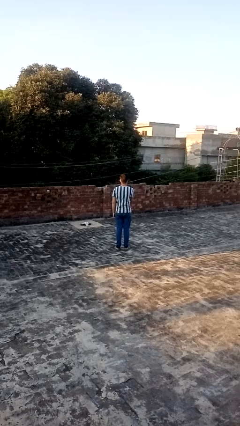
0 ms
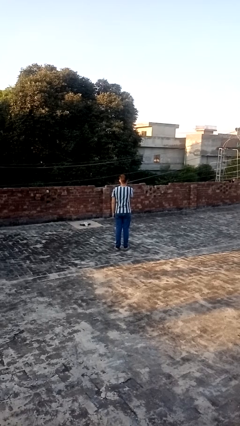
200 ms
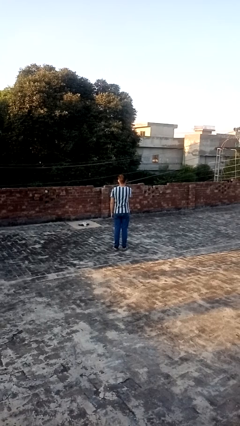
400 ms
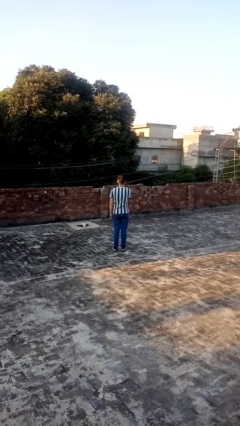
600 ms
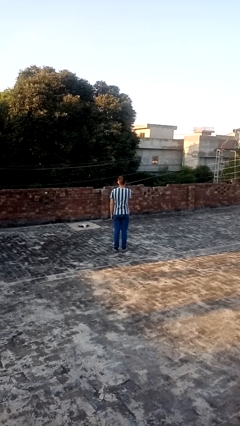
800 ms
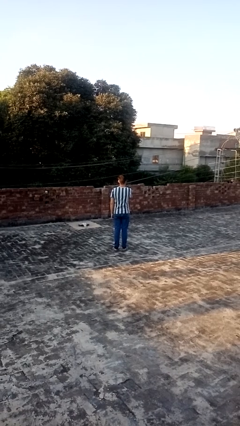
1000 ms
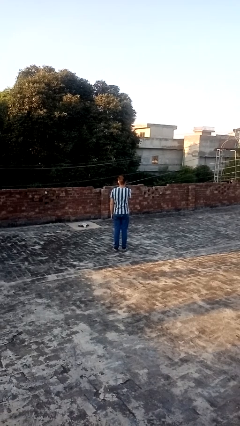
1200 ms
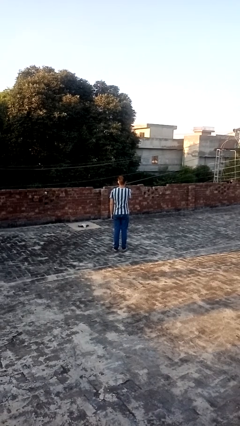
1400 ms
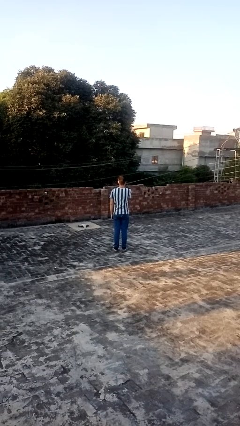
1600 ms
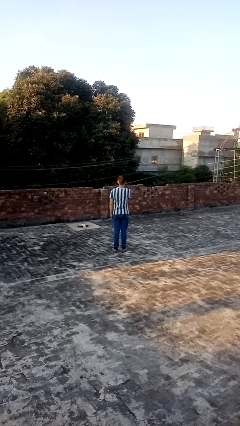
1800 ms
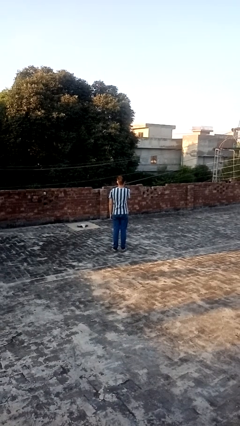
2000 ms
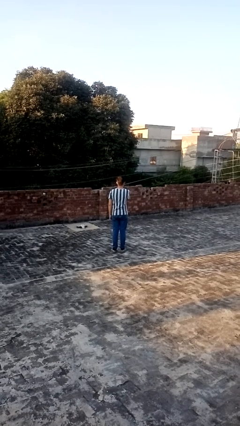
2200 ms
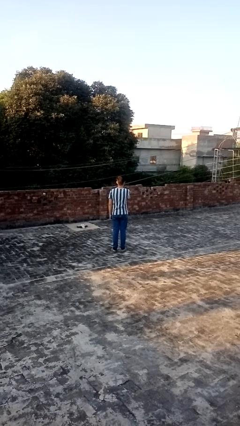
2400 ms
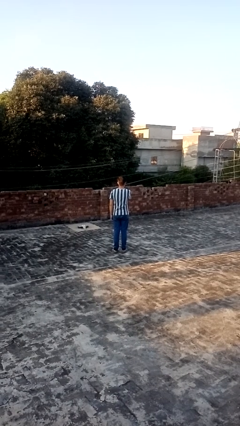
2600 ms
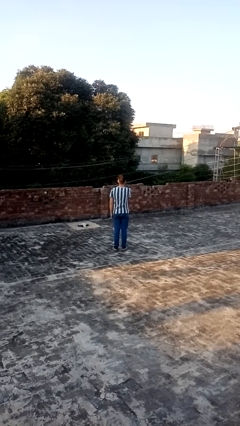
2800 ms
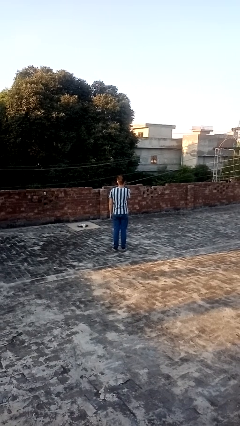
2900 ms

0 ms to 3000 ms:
person gestures swipe left

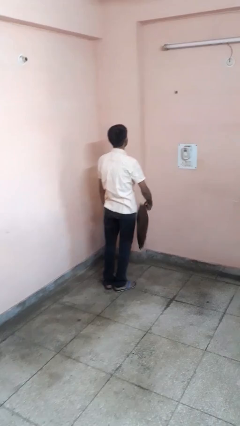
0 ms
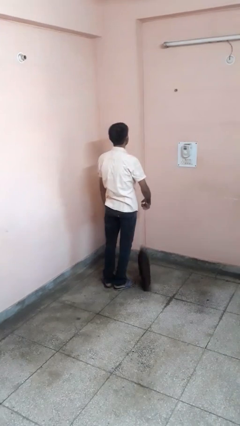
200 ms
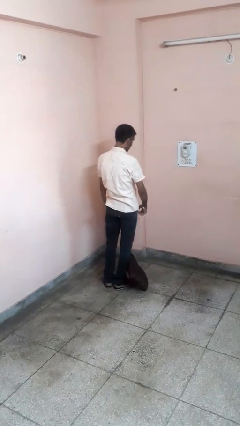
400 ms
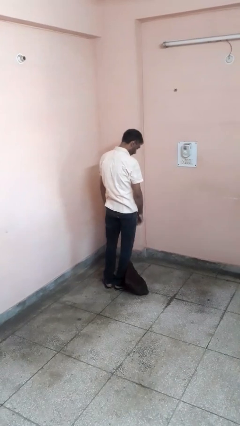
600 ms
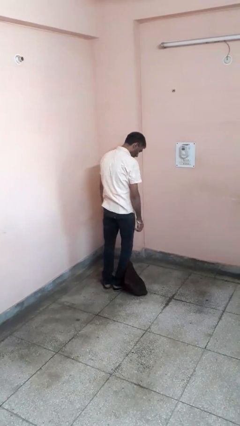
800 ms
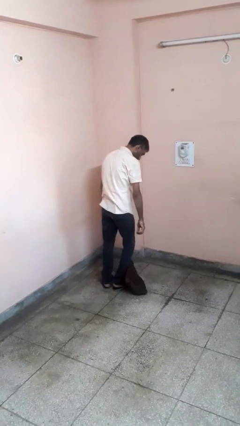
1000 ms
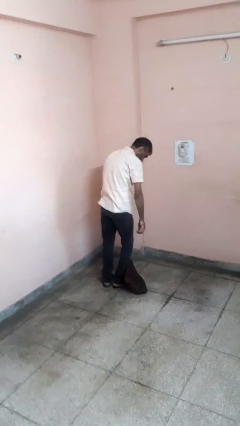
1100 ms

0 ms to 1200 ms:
person throws object to ground

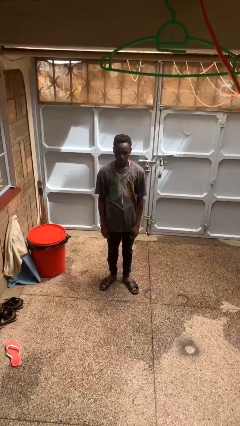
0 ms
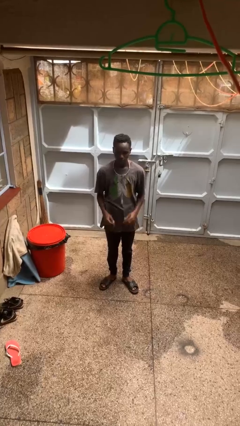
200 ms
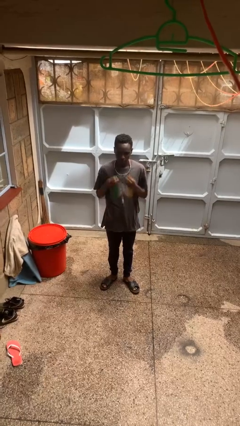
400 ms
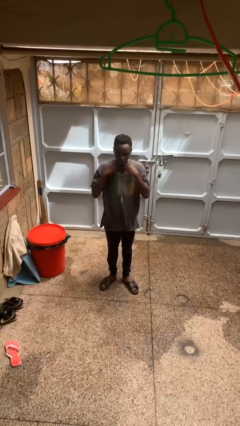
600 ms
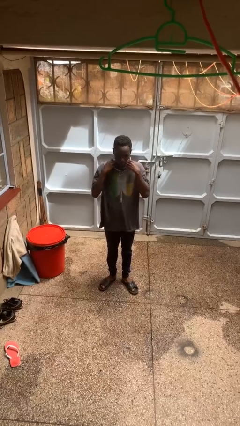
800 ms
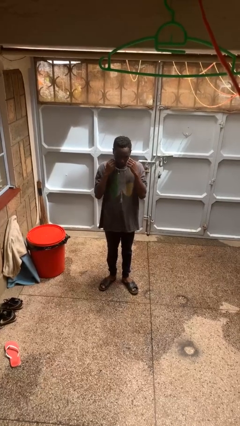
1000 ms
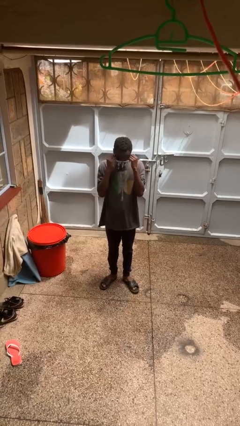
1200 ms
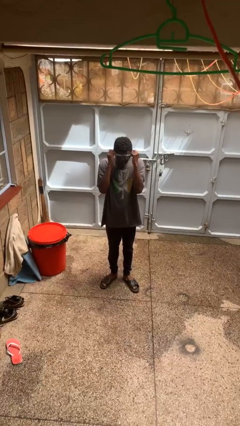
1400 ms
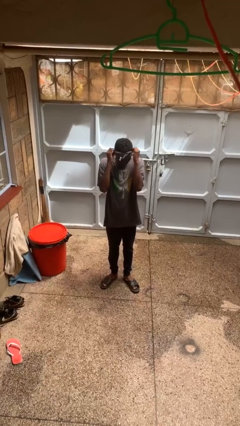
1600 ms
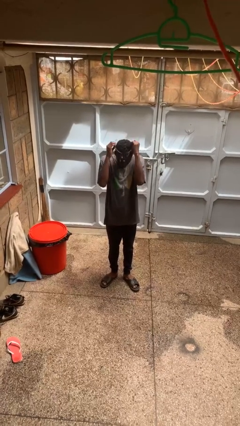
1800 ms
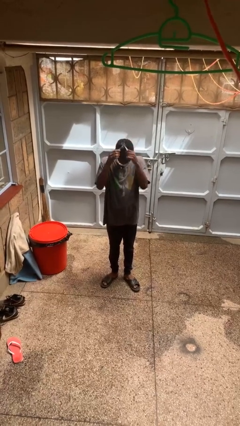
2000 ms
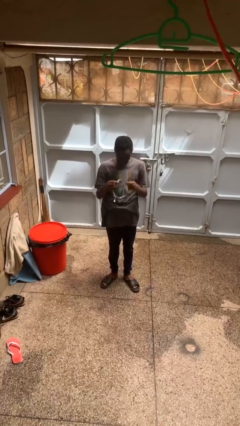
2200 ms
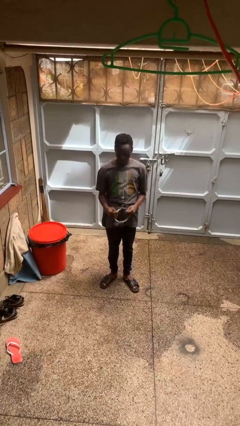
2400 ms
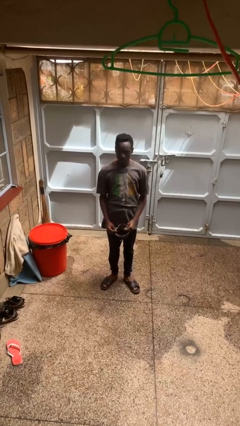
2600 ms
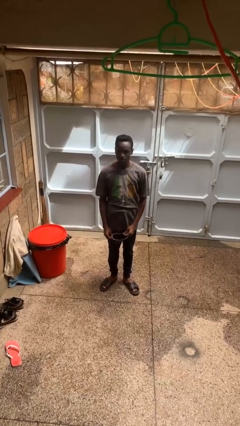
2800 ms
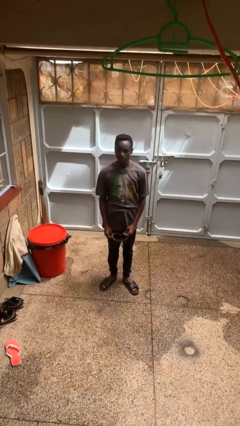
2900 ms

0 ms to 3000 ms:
person takes off necklace

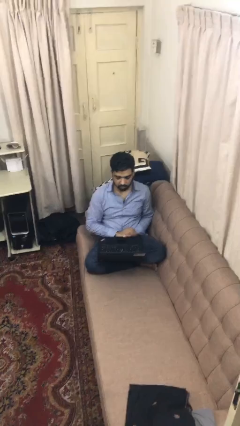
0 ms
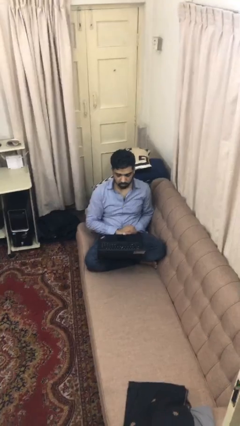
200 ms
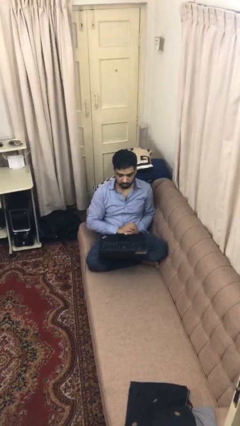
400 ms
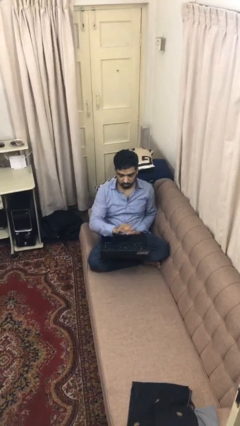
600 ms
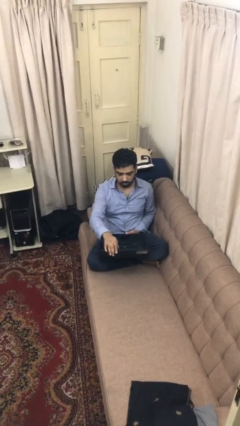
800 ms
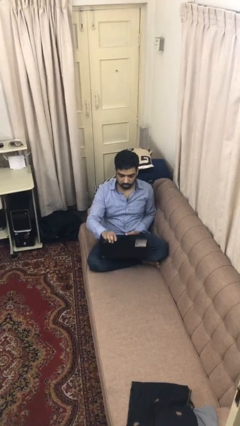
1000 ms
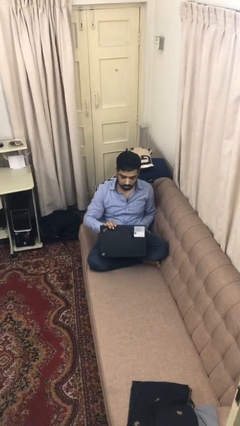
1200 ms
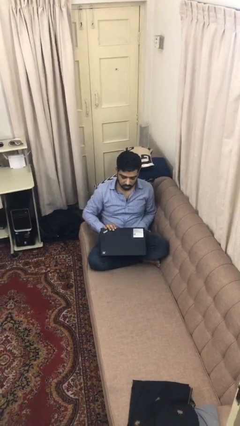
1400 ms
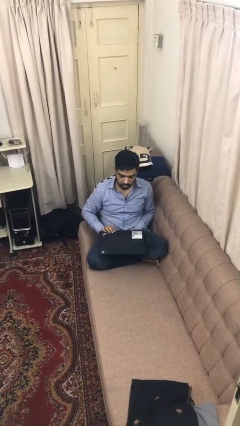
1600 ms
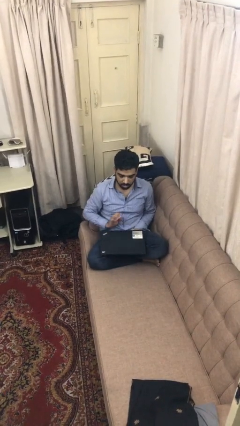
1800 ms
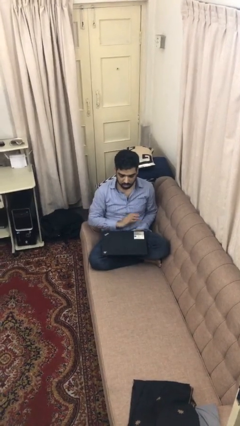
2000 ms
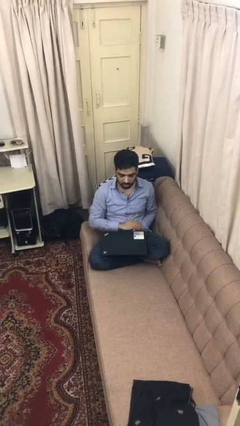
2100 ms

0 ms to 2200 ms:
person closes laptop

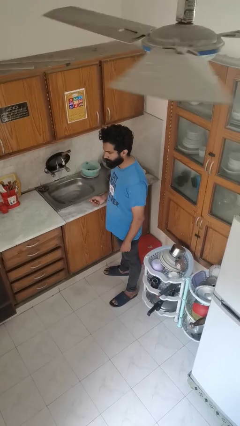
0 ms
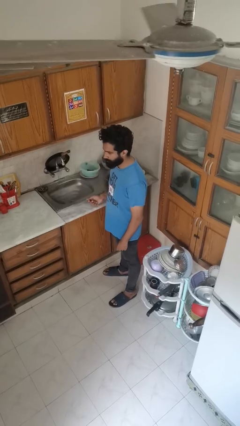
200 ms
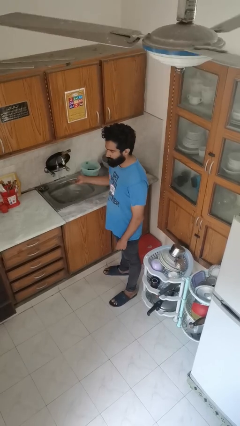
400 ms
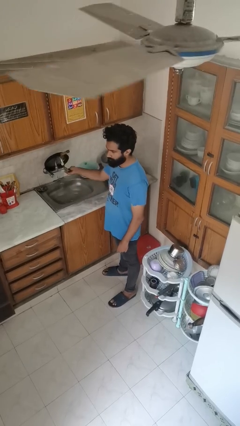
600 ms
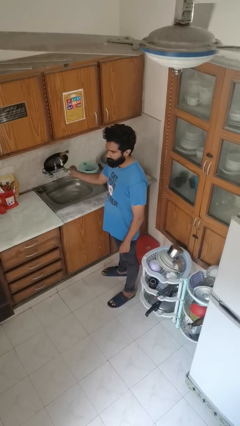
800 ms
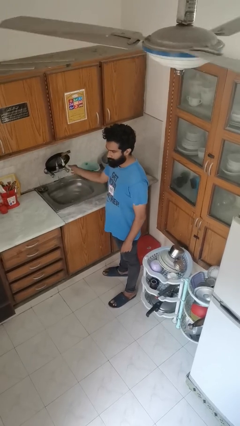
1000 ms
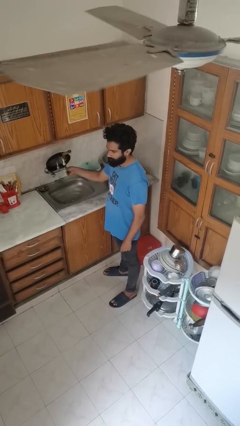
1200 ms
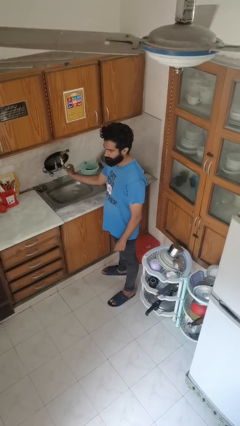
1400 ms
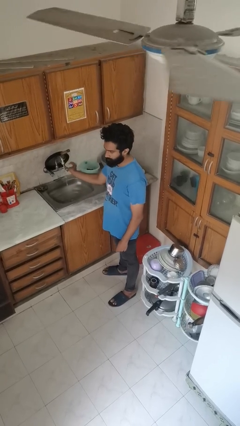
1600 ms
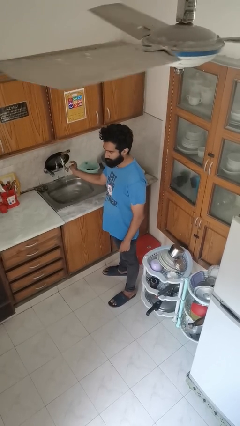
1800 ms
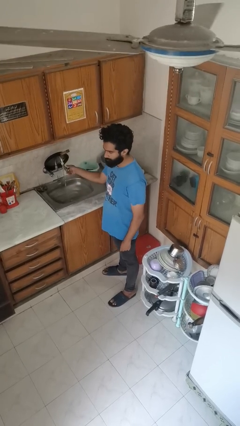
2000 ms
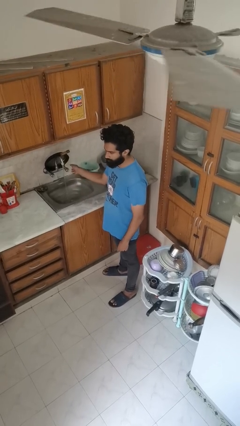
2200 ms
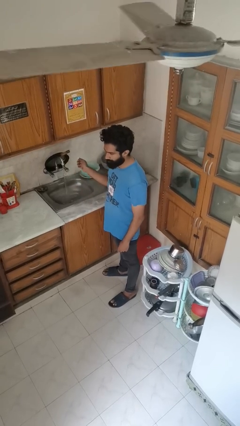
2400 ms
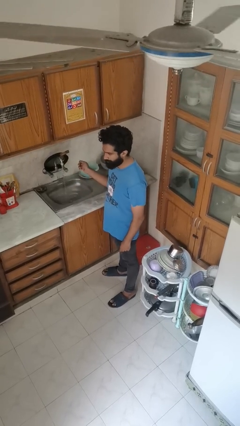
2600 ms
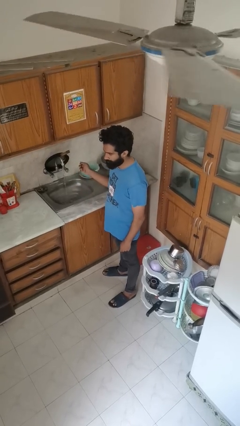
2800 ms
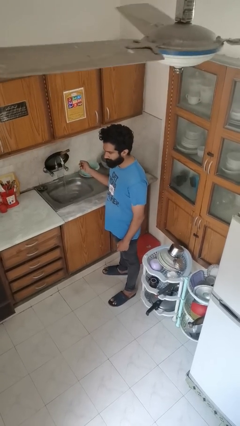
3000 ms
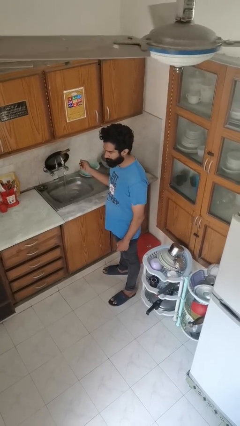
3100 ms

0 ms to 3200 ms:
person turns on faucet

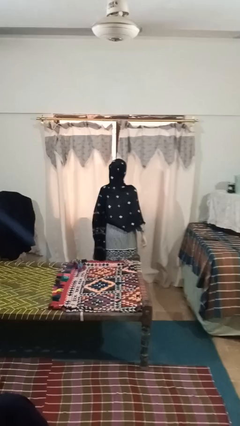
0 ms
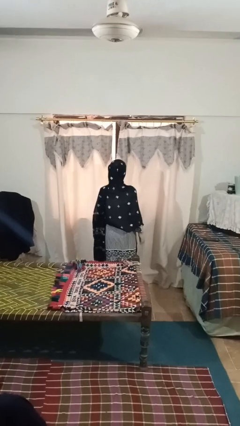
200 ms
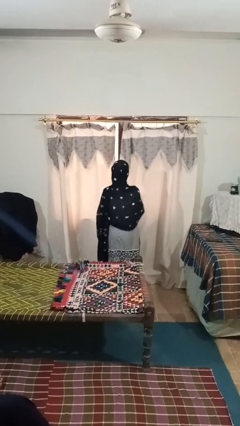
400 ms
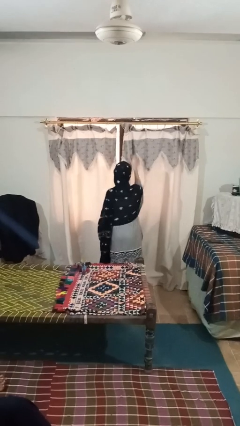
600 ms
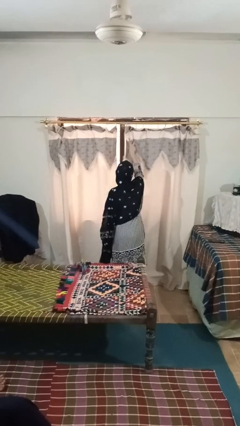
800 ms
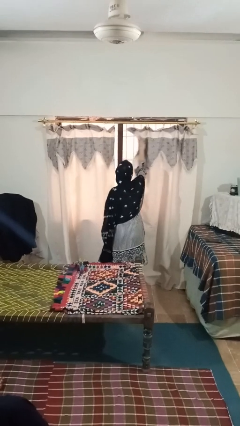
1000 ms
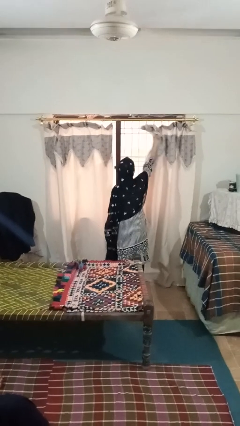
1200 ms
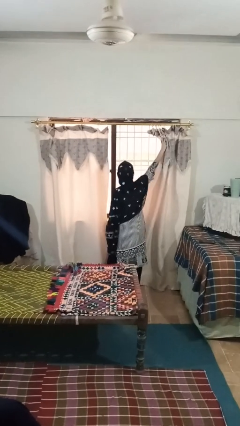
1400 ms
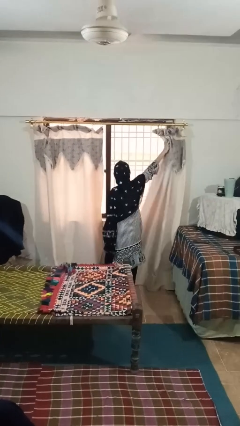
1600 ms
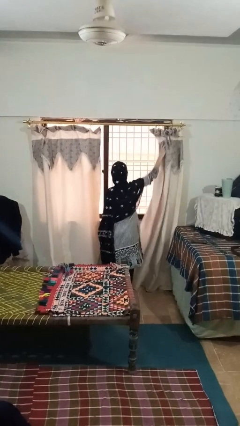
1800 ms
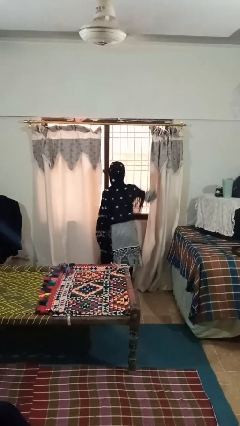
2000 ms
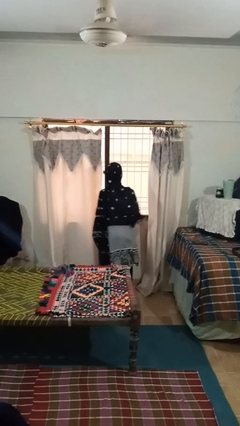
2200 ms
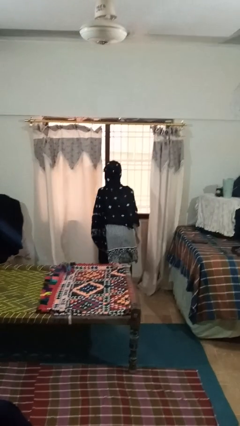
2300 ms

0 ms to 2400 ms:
person opens curtains

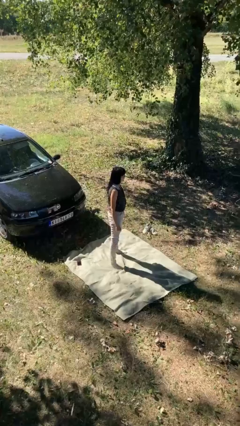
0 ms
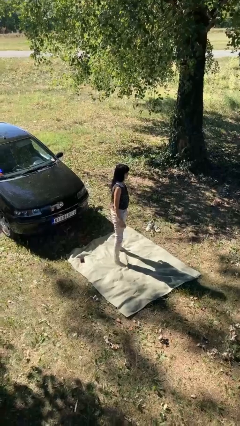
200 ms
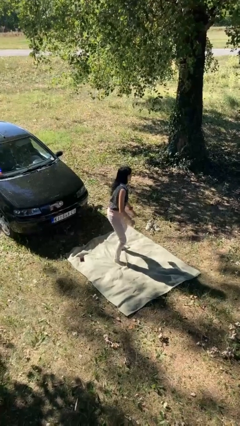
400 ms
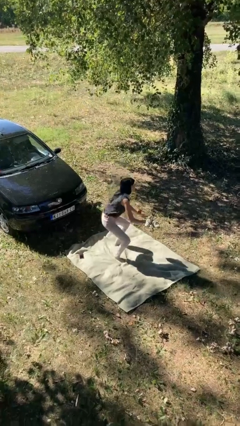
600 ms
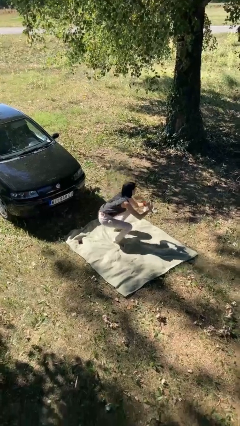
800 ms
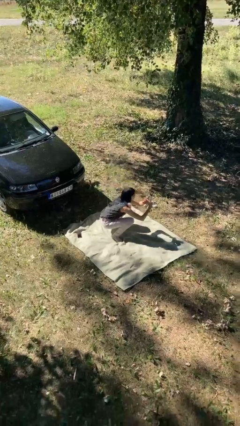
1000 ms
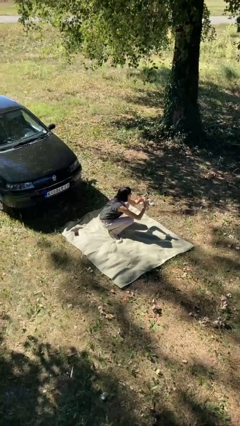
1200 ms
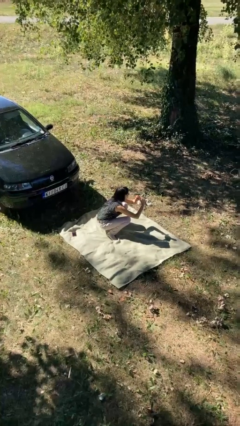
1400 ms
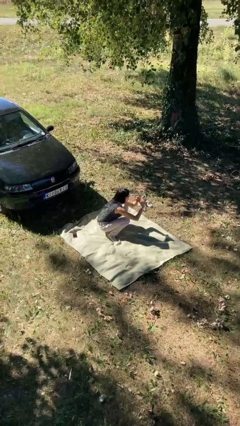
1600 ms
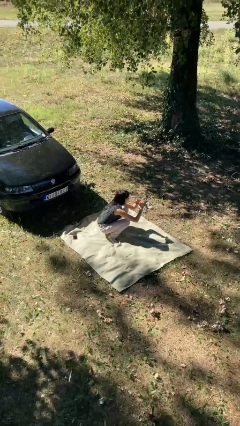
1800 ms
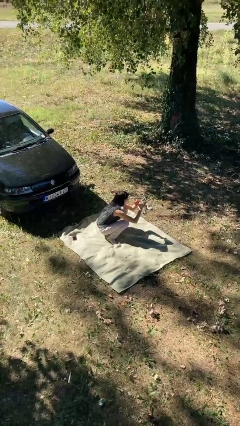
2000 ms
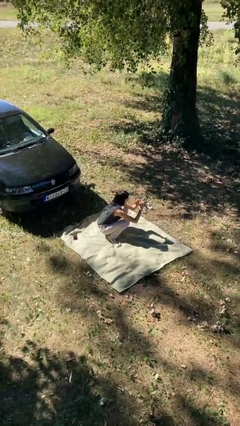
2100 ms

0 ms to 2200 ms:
person squats

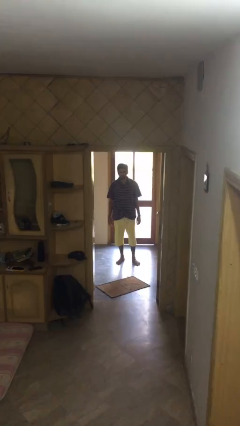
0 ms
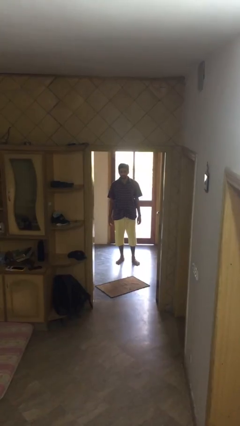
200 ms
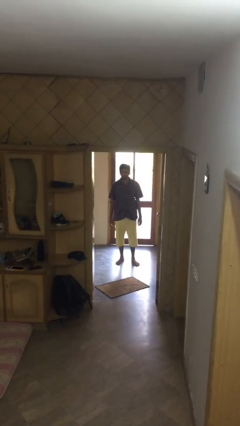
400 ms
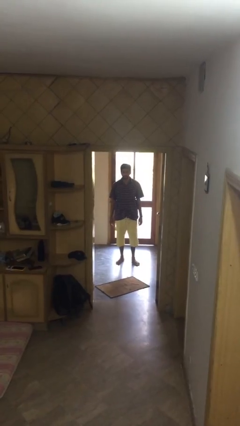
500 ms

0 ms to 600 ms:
person enters scene through structure
